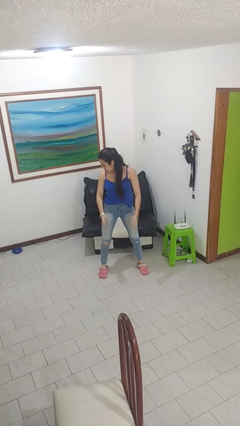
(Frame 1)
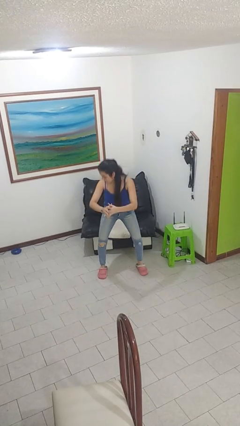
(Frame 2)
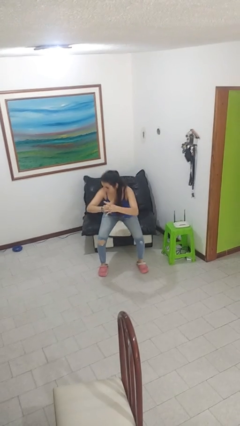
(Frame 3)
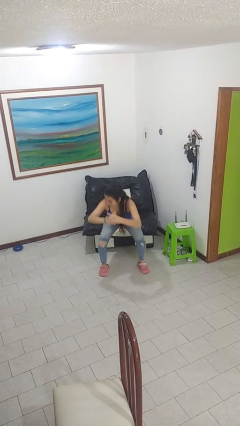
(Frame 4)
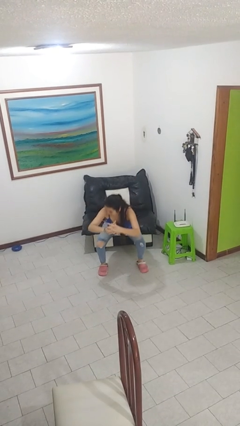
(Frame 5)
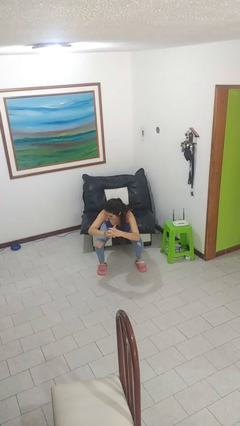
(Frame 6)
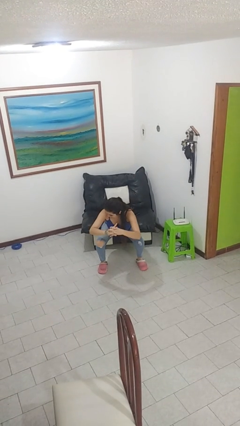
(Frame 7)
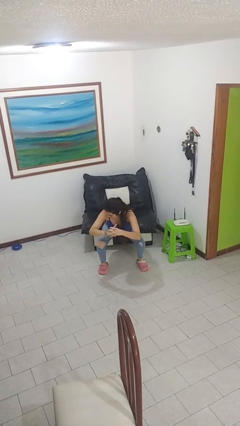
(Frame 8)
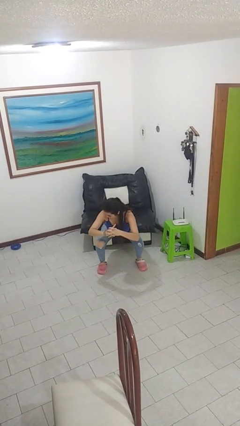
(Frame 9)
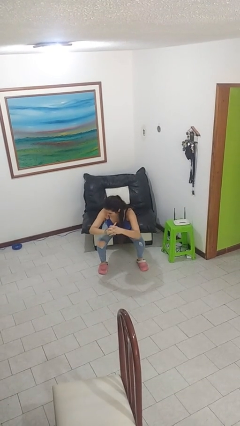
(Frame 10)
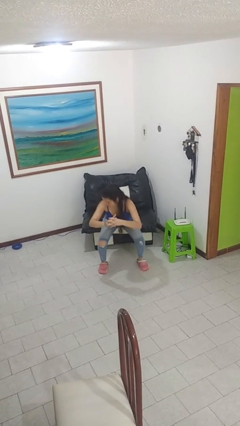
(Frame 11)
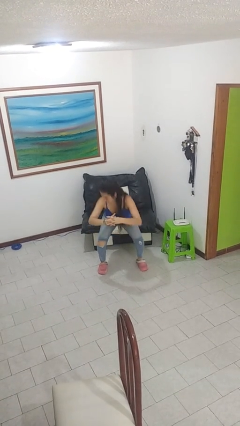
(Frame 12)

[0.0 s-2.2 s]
person squats

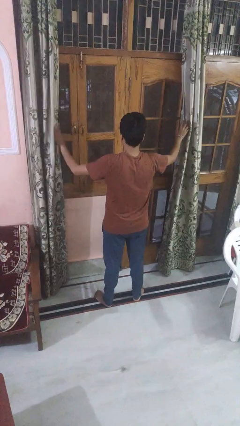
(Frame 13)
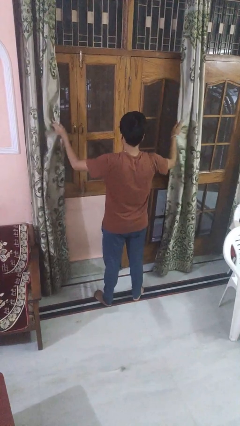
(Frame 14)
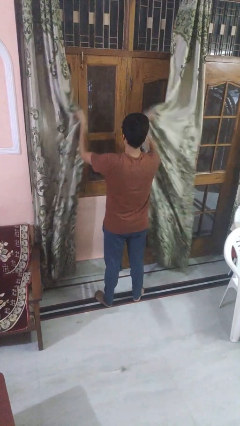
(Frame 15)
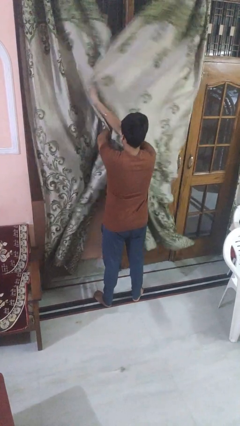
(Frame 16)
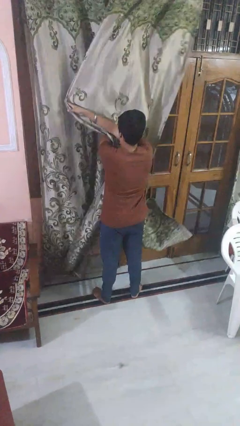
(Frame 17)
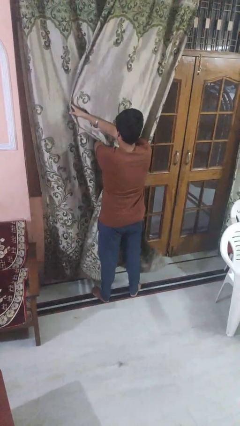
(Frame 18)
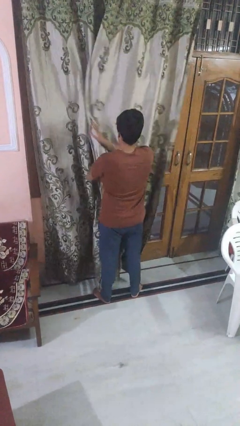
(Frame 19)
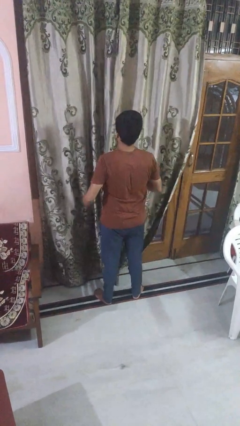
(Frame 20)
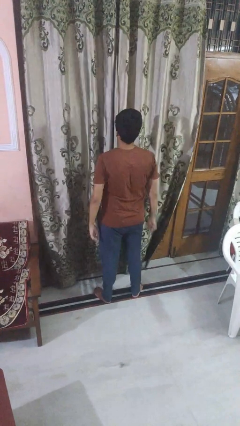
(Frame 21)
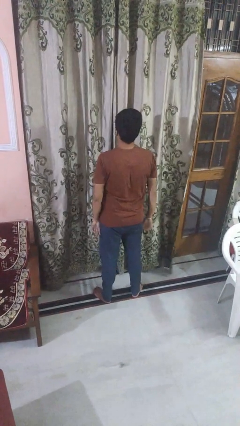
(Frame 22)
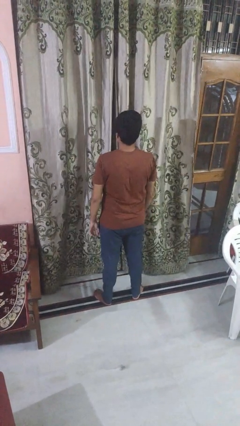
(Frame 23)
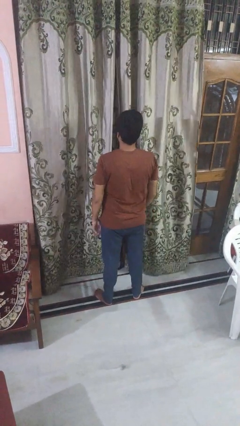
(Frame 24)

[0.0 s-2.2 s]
person closes curtains

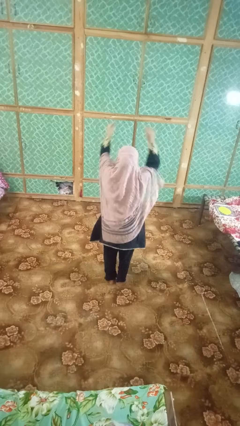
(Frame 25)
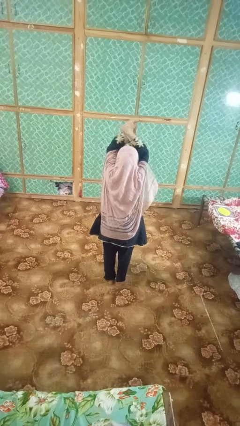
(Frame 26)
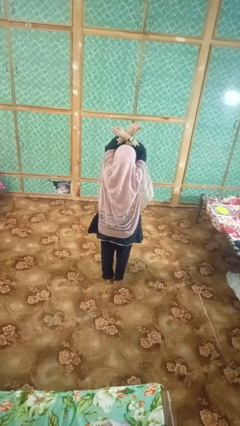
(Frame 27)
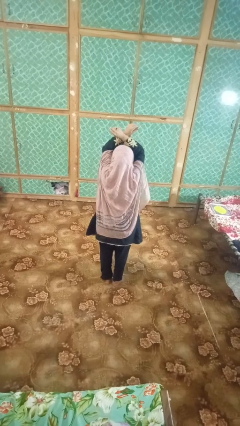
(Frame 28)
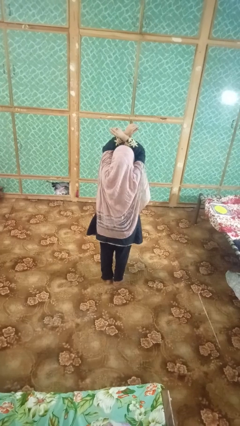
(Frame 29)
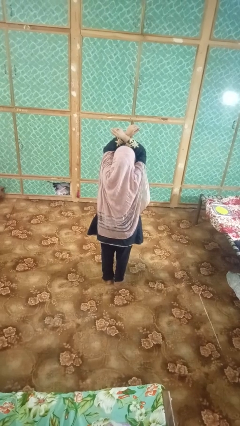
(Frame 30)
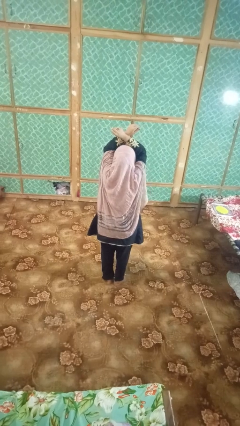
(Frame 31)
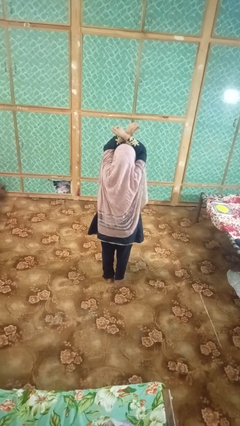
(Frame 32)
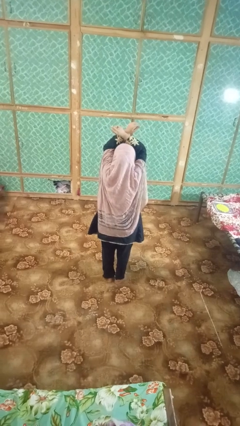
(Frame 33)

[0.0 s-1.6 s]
person gestures arms x

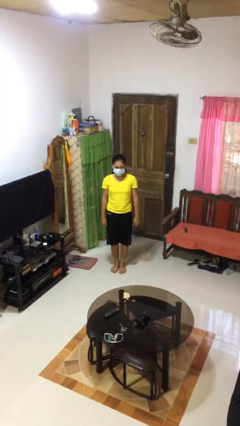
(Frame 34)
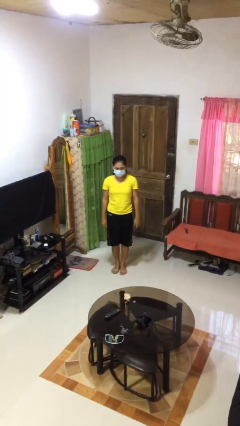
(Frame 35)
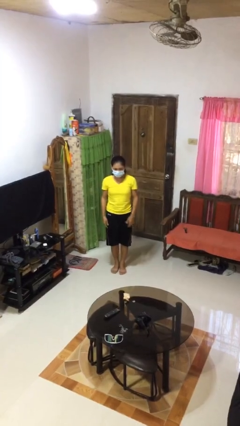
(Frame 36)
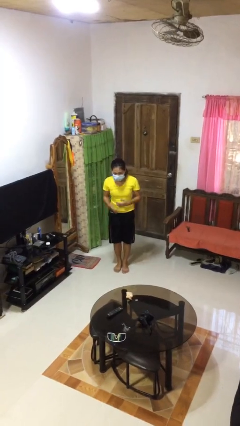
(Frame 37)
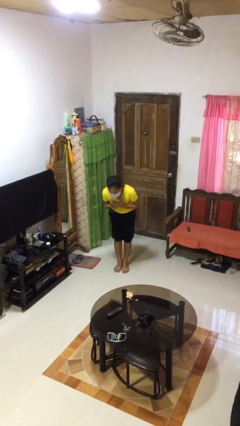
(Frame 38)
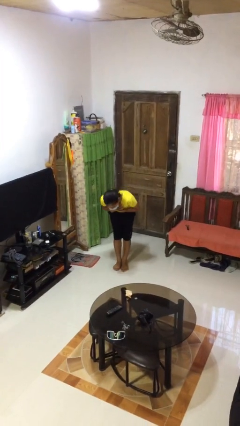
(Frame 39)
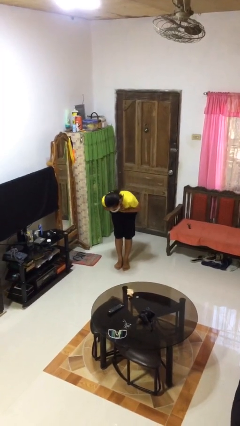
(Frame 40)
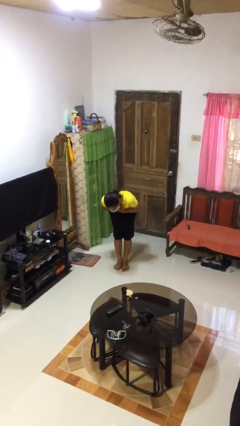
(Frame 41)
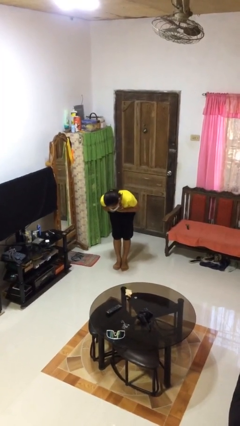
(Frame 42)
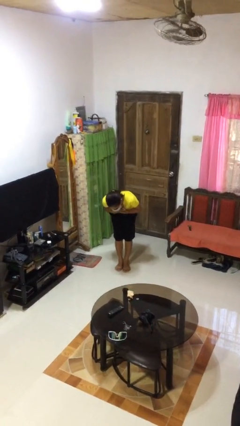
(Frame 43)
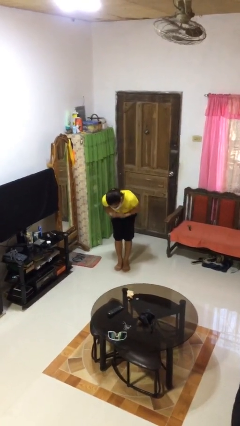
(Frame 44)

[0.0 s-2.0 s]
person bows

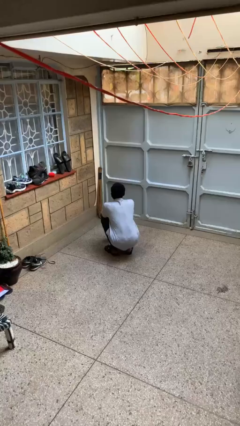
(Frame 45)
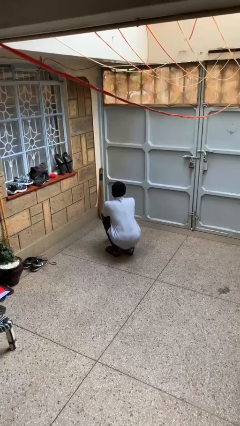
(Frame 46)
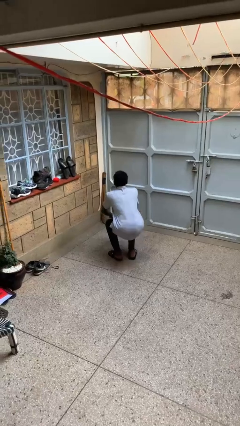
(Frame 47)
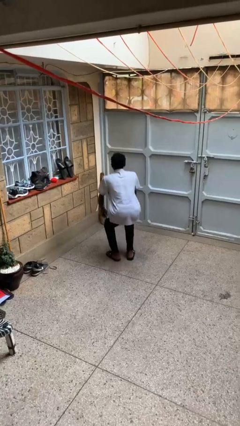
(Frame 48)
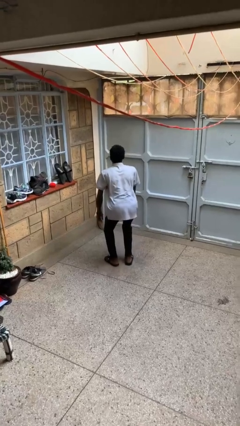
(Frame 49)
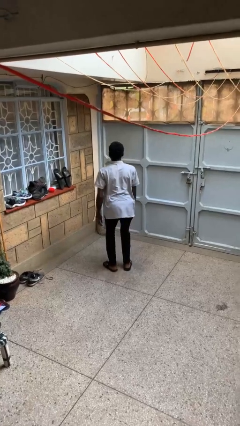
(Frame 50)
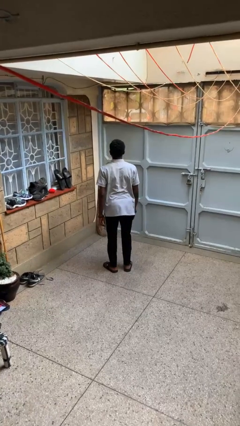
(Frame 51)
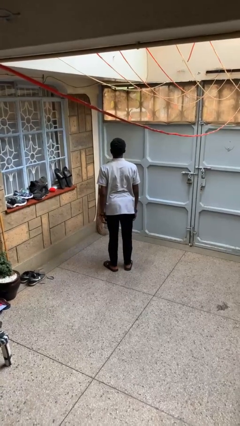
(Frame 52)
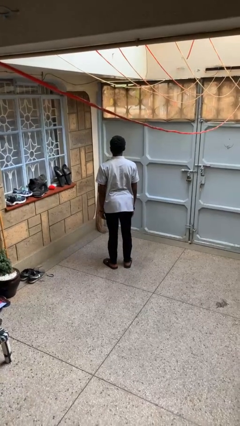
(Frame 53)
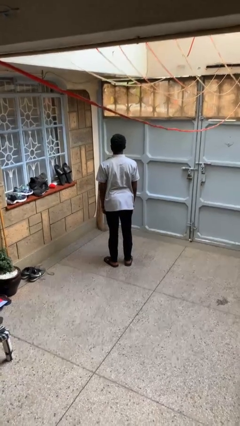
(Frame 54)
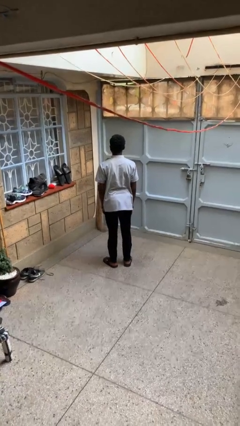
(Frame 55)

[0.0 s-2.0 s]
person stands up

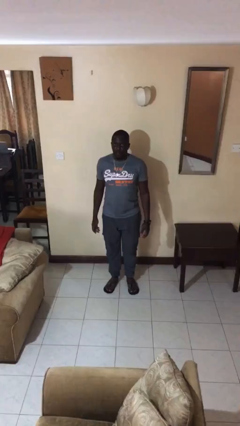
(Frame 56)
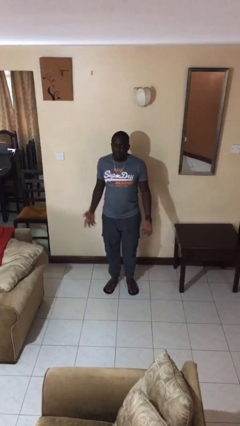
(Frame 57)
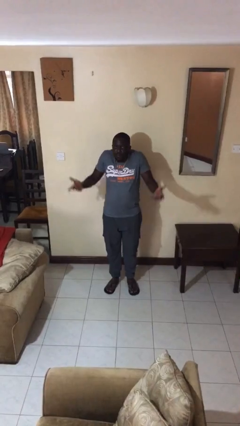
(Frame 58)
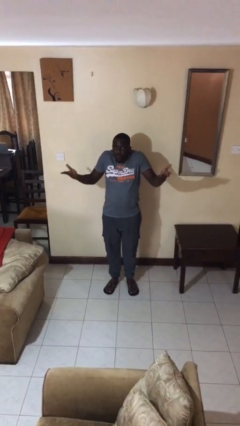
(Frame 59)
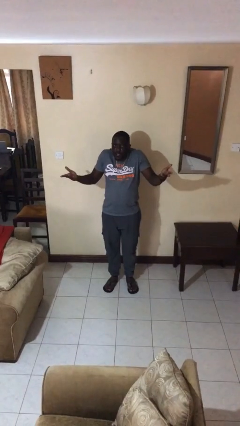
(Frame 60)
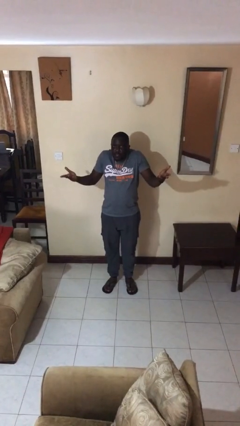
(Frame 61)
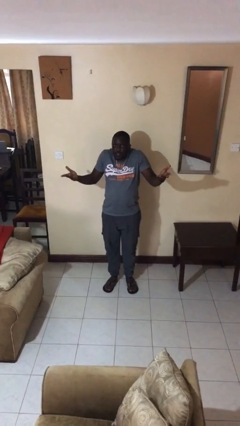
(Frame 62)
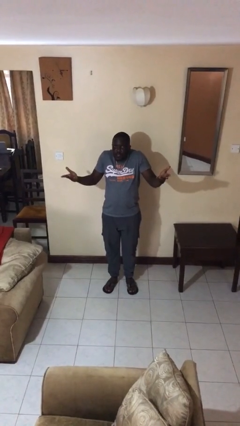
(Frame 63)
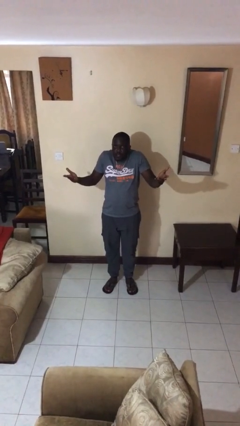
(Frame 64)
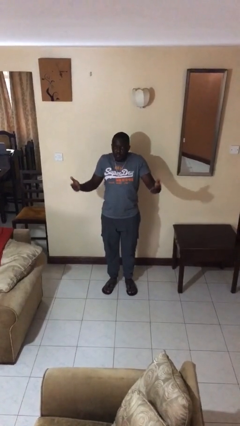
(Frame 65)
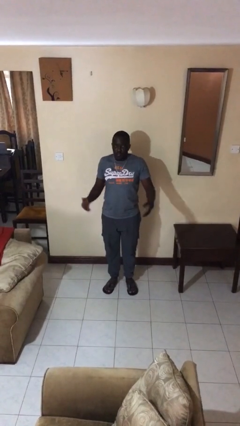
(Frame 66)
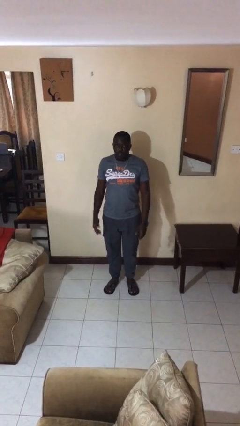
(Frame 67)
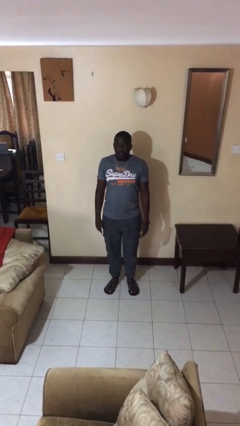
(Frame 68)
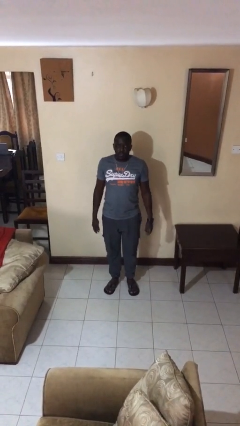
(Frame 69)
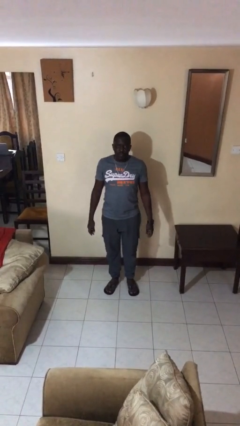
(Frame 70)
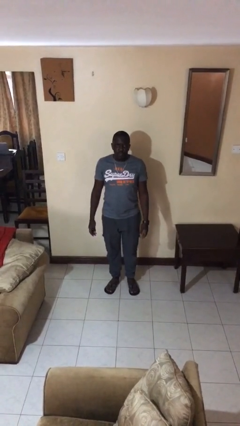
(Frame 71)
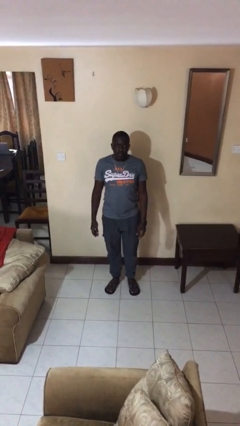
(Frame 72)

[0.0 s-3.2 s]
person shrugs

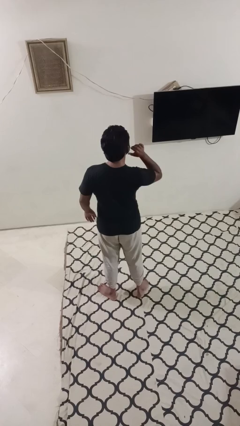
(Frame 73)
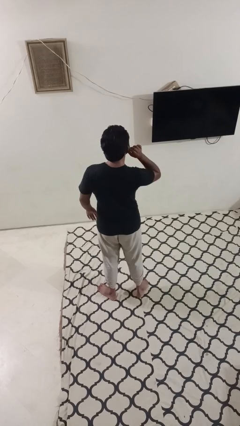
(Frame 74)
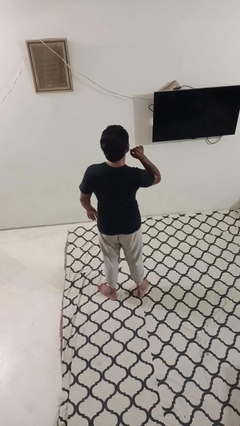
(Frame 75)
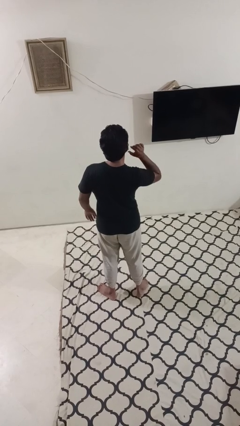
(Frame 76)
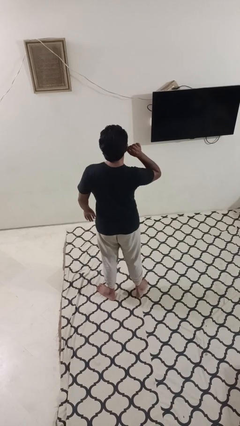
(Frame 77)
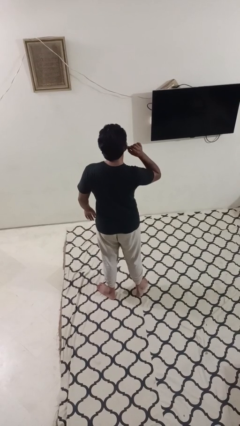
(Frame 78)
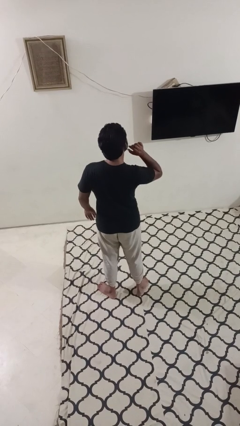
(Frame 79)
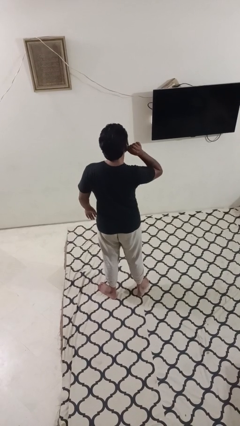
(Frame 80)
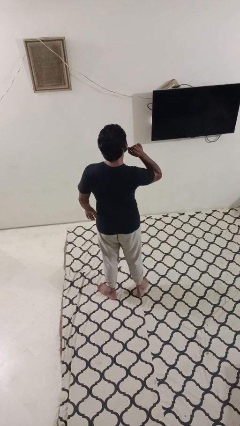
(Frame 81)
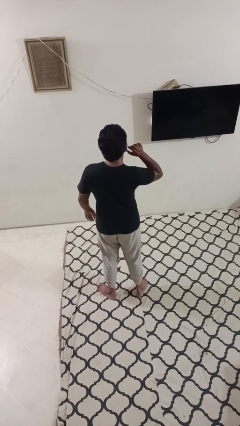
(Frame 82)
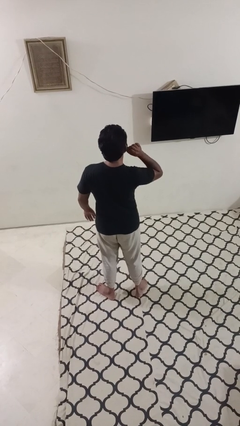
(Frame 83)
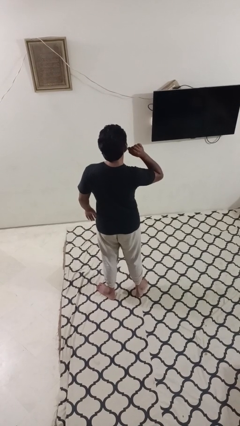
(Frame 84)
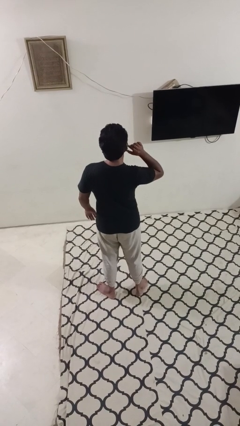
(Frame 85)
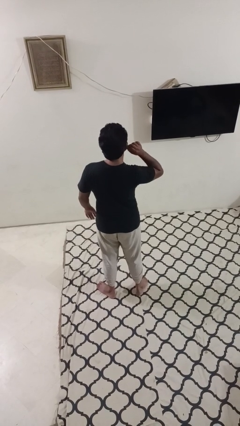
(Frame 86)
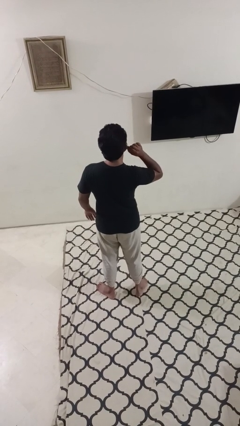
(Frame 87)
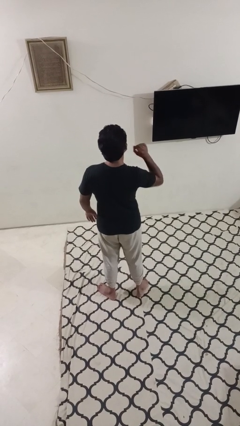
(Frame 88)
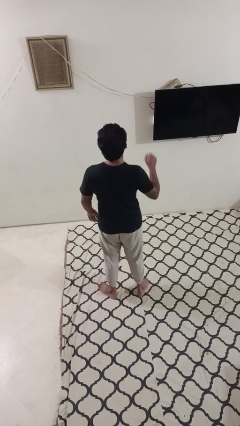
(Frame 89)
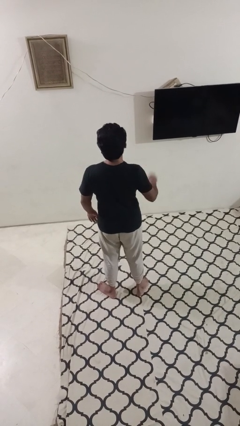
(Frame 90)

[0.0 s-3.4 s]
person touches earlobe

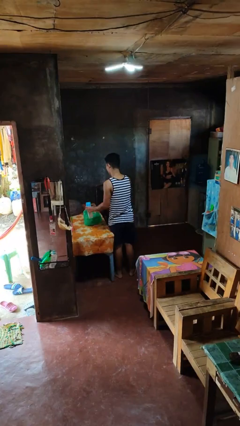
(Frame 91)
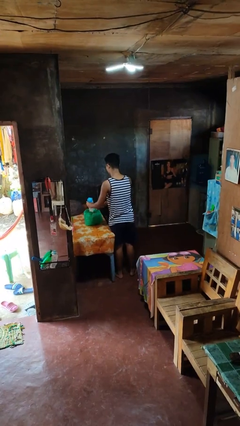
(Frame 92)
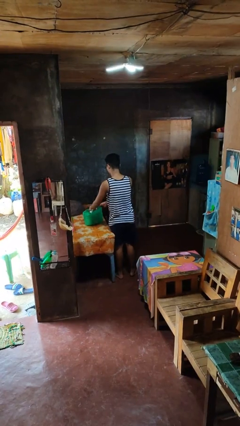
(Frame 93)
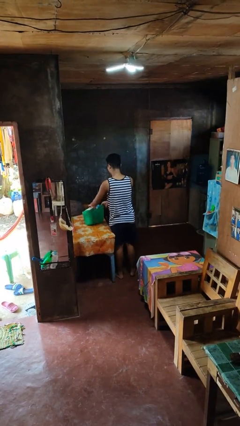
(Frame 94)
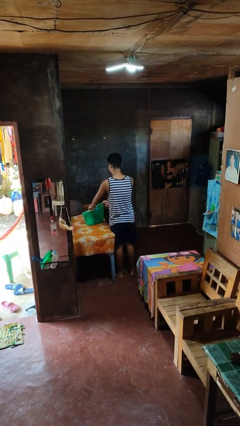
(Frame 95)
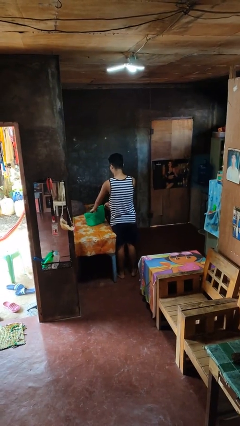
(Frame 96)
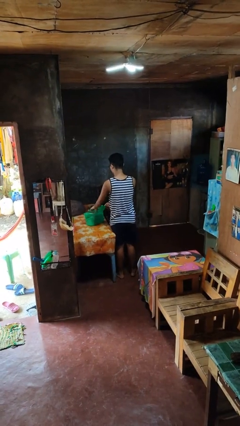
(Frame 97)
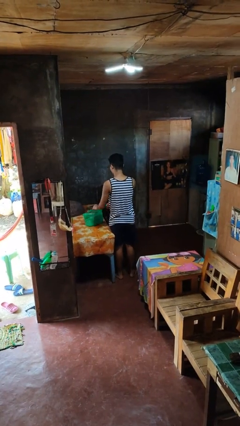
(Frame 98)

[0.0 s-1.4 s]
person puts object into bag
